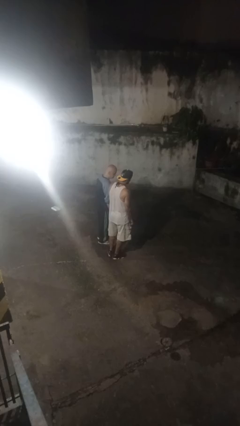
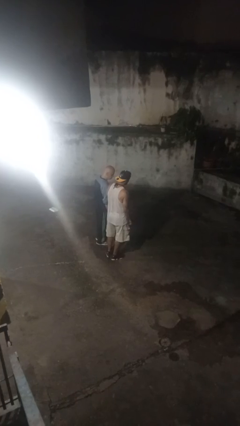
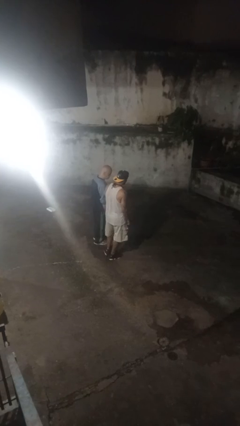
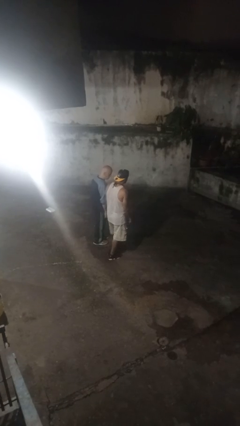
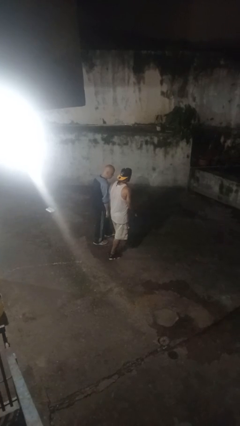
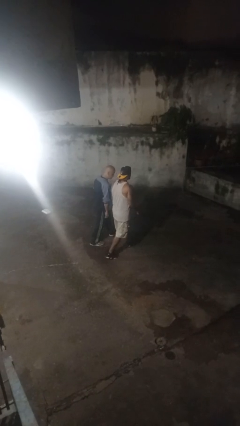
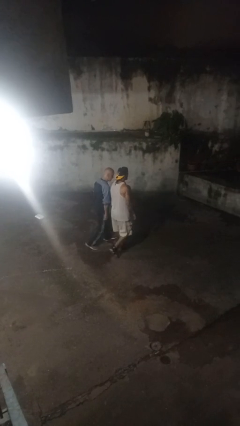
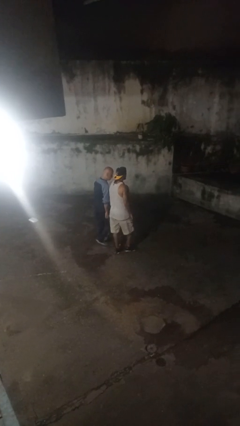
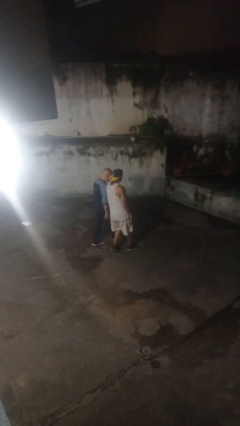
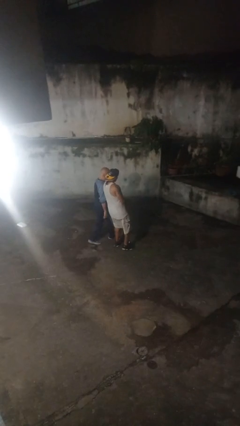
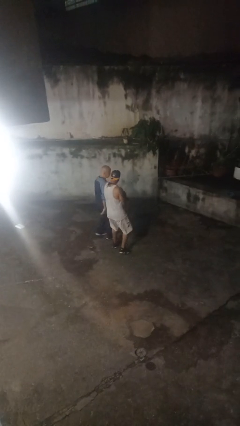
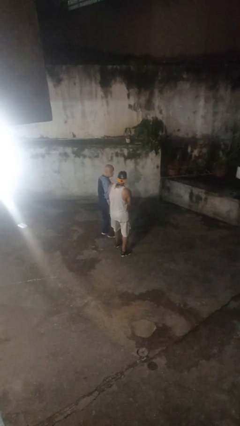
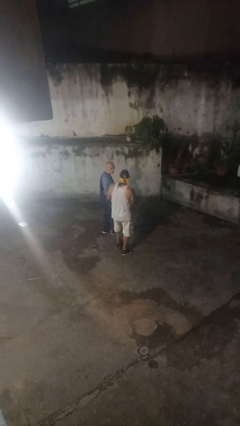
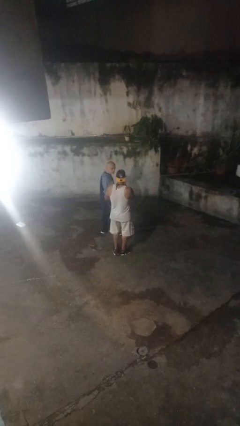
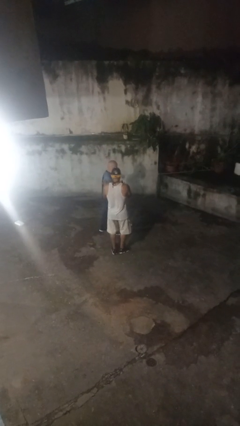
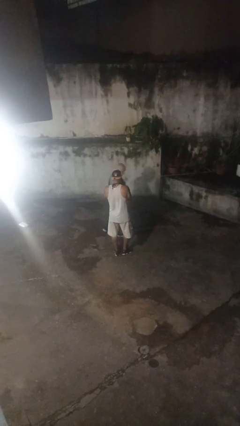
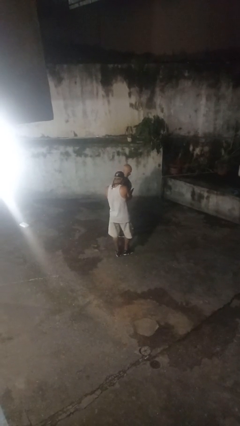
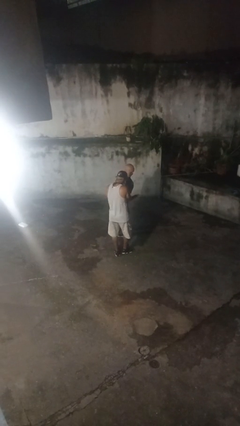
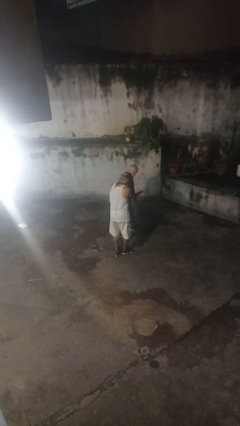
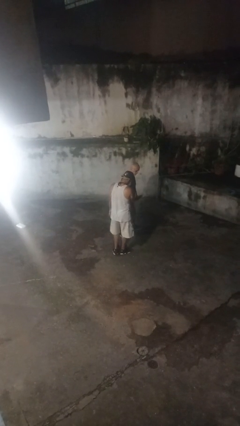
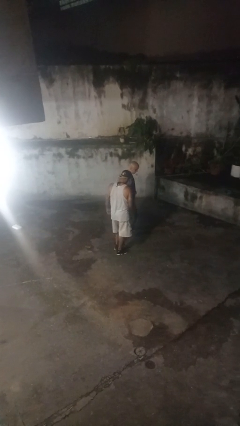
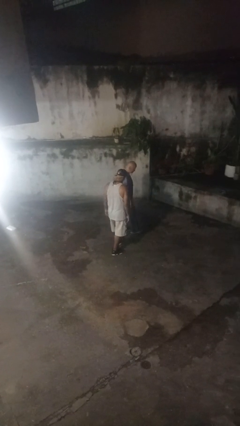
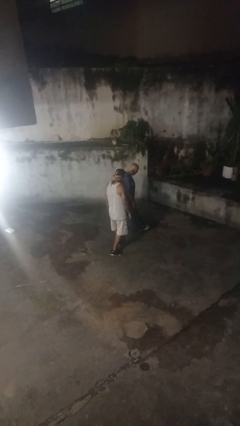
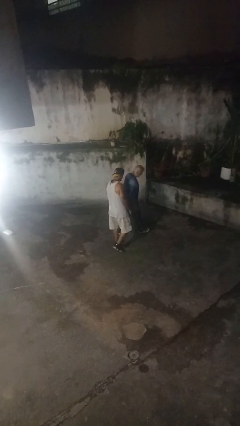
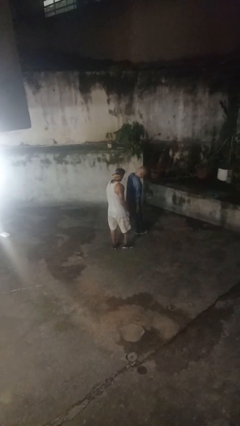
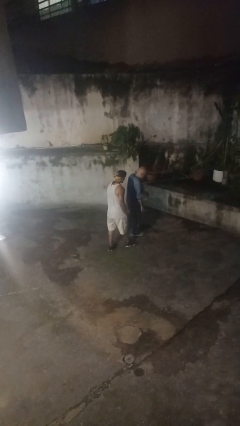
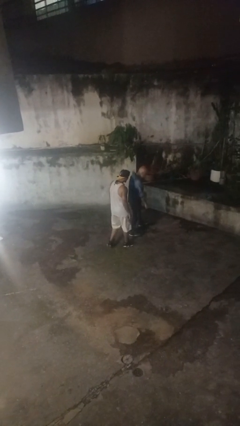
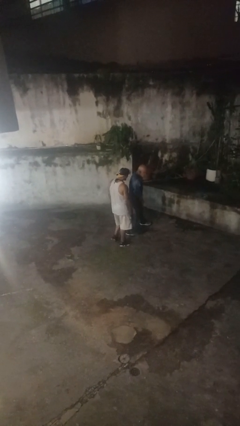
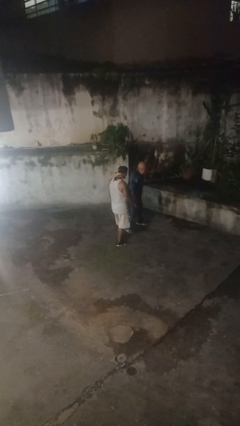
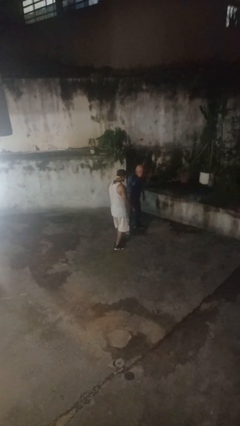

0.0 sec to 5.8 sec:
person bumps into person

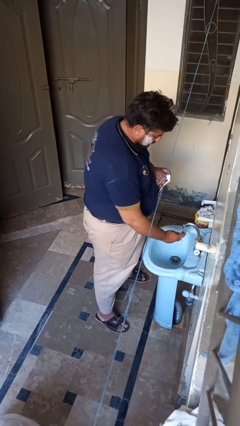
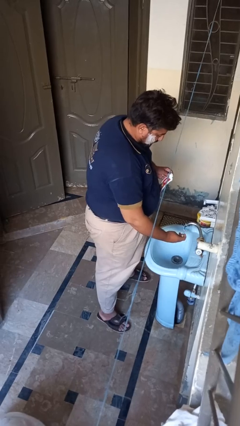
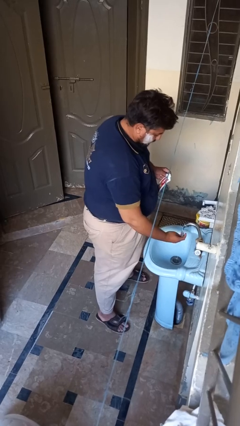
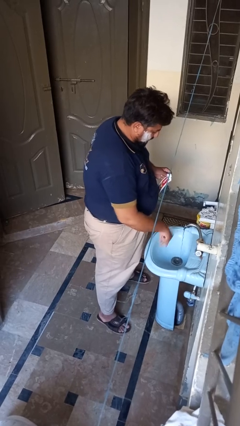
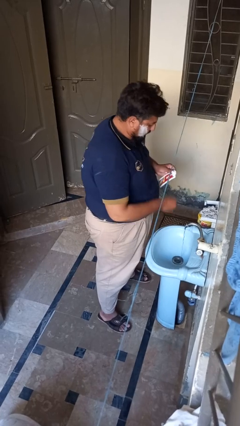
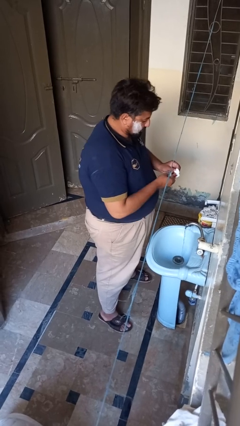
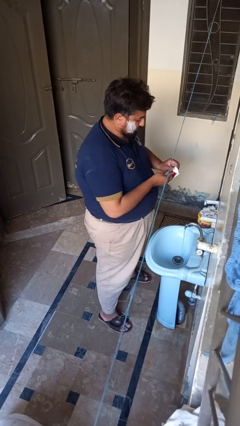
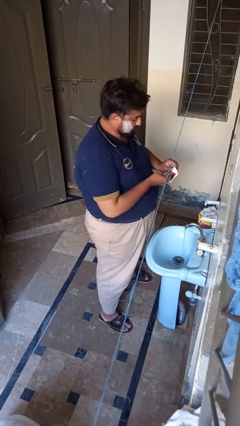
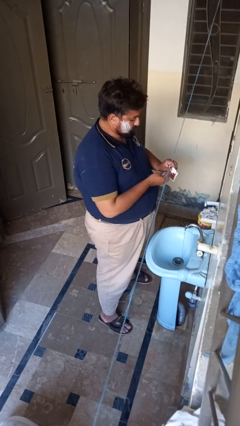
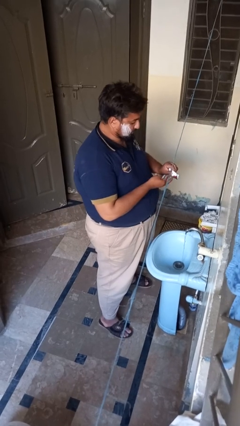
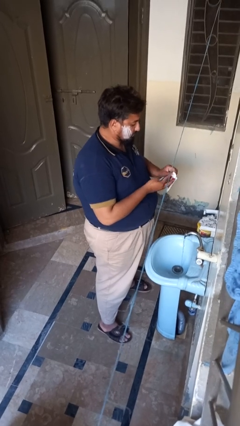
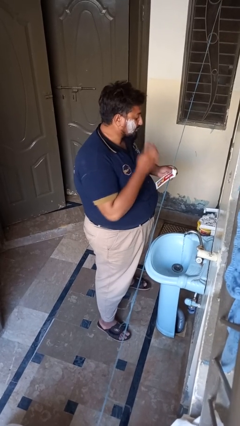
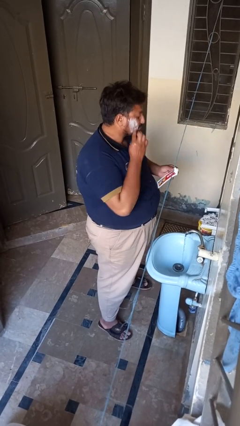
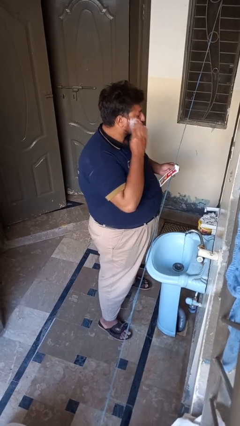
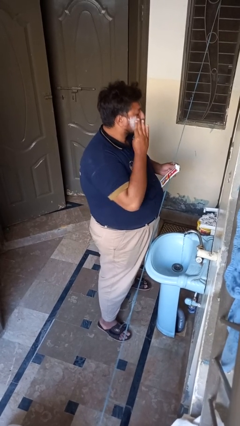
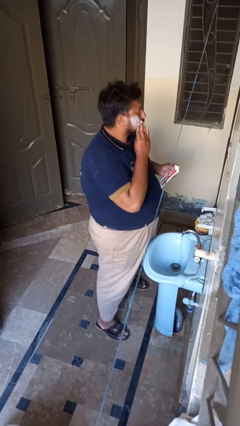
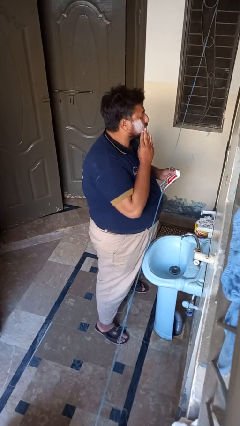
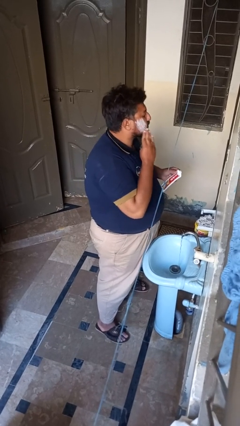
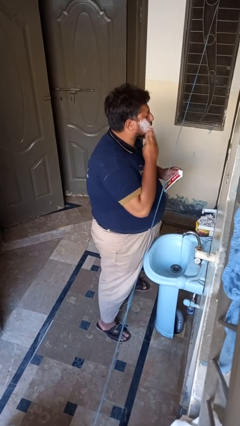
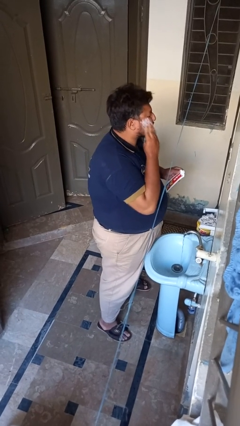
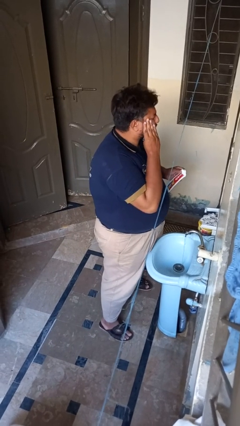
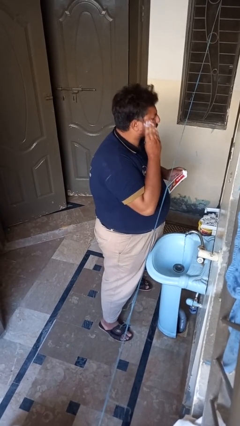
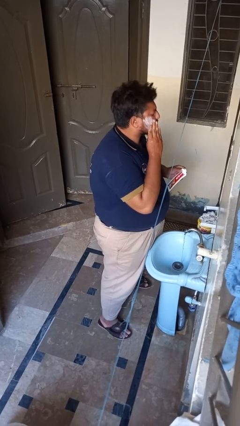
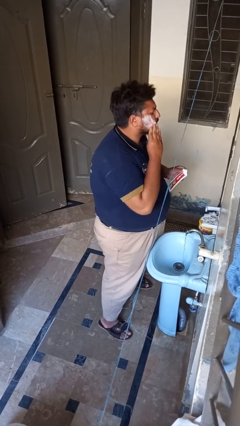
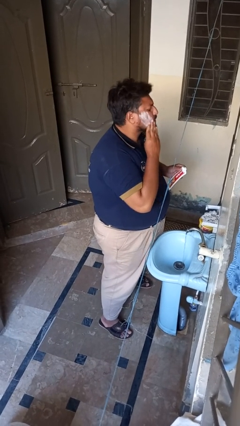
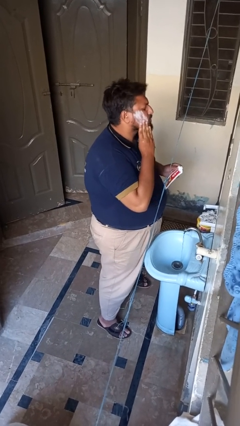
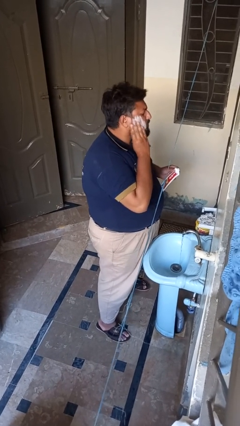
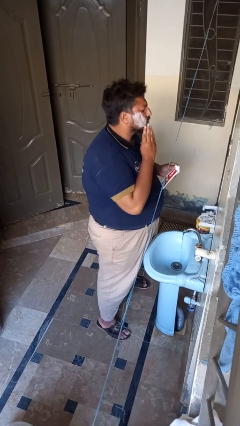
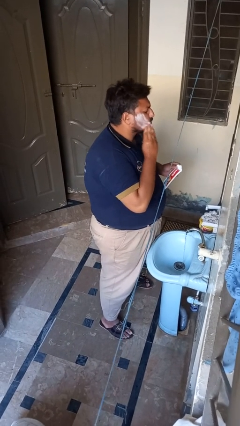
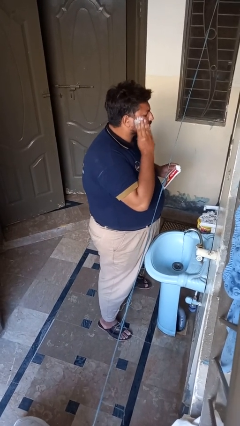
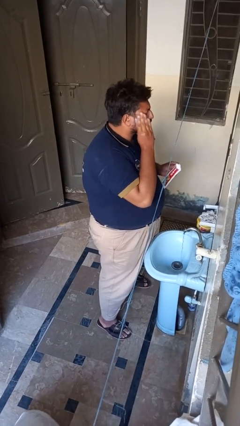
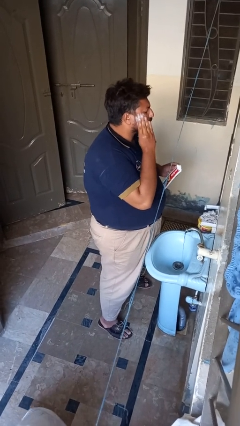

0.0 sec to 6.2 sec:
person applies shaving cream

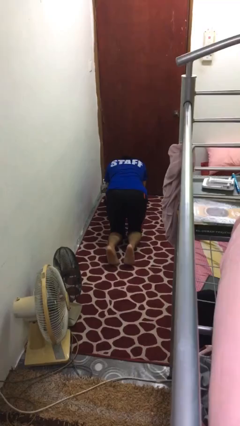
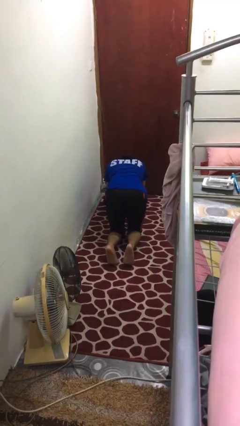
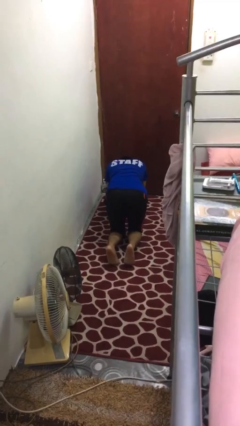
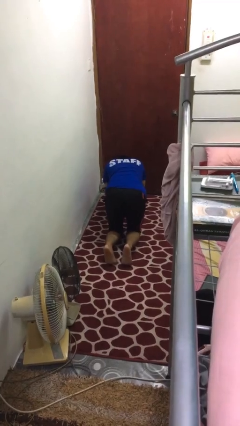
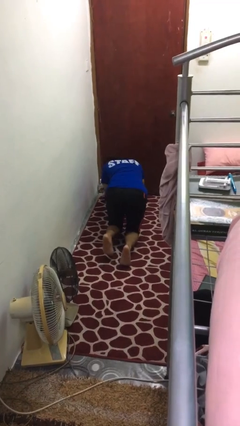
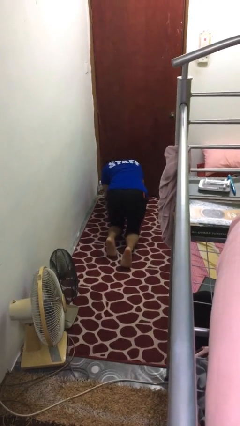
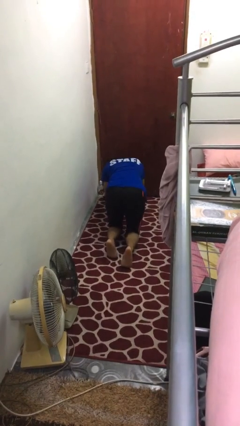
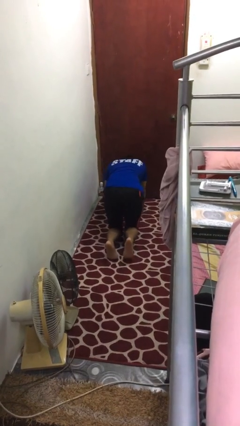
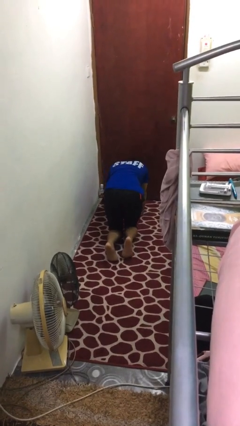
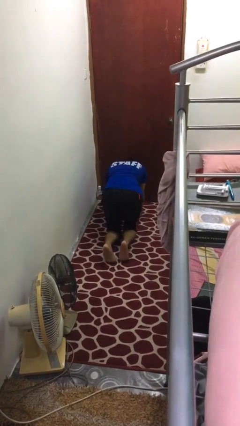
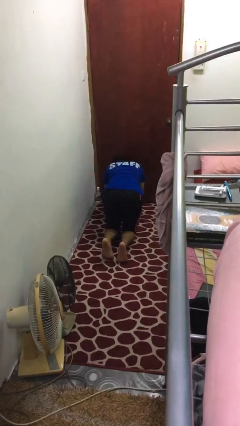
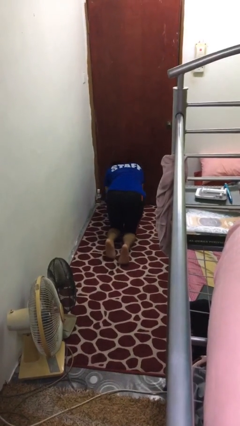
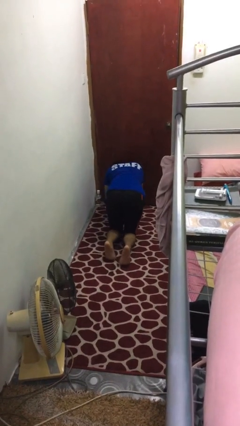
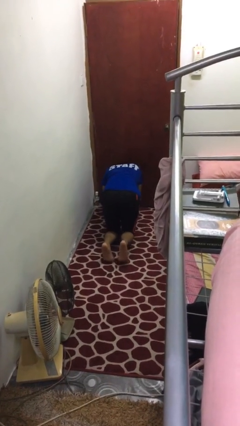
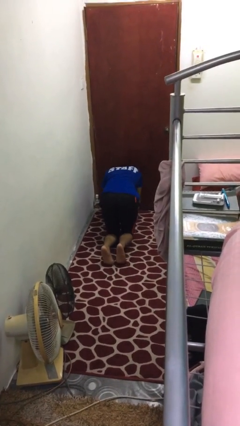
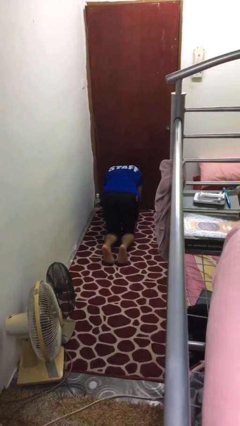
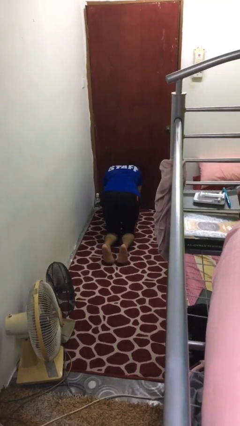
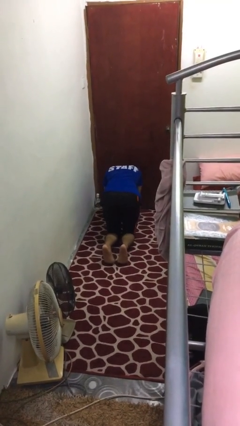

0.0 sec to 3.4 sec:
person crawls

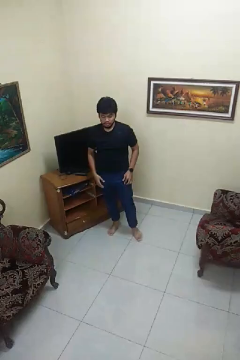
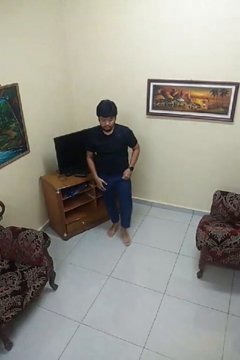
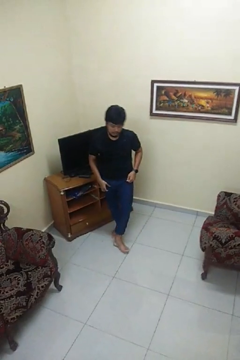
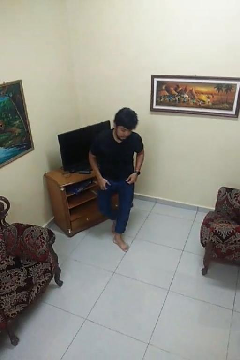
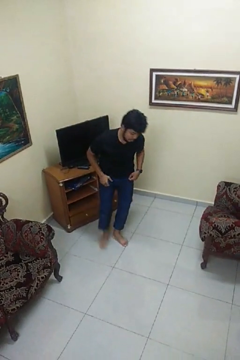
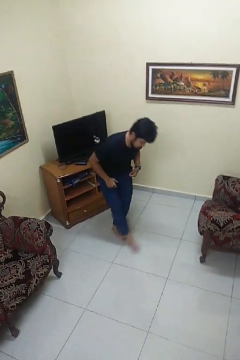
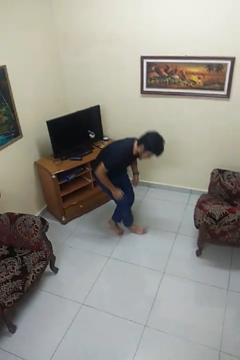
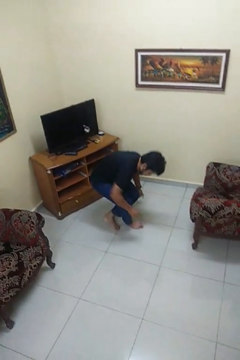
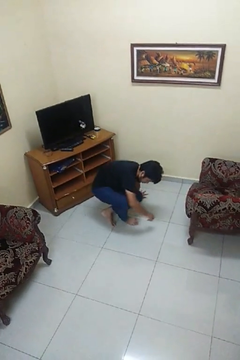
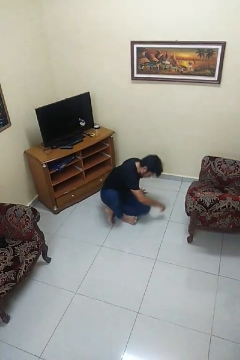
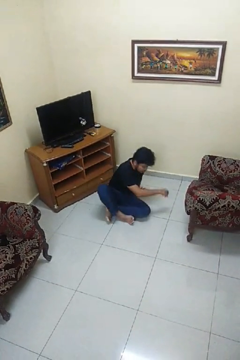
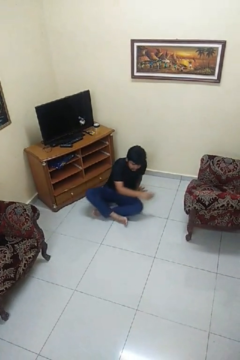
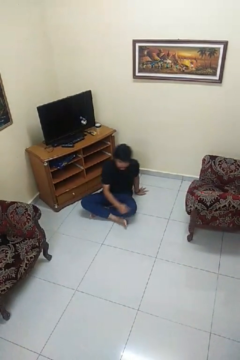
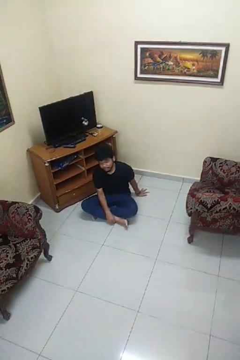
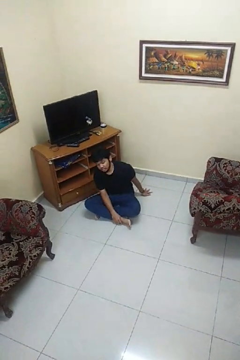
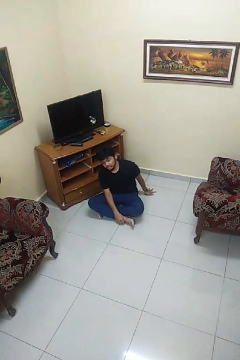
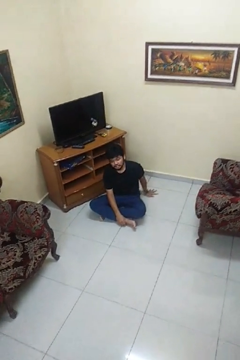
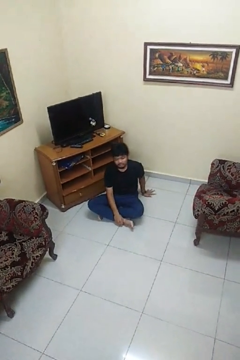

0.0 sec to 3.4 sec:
person sits crisscross
